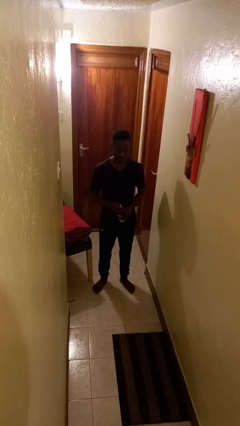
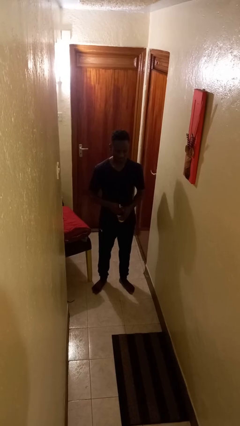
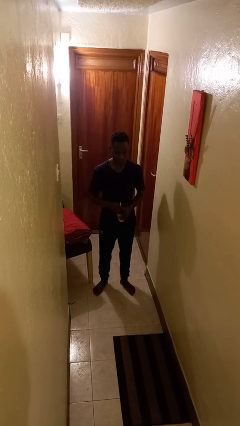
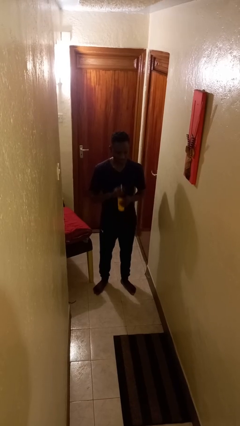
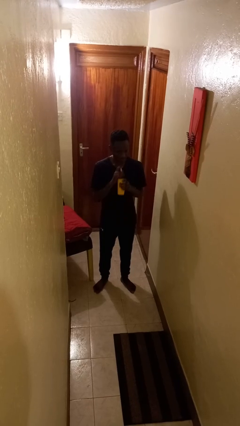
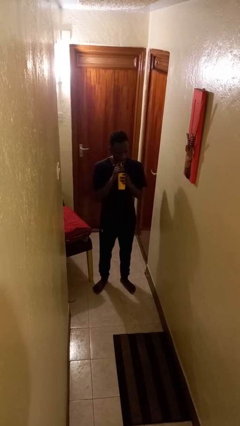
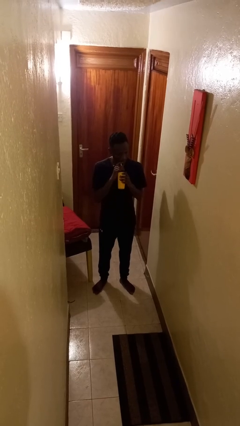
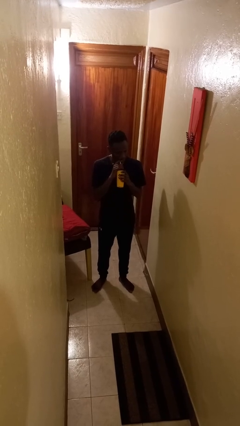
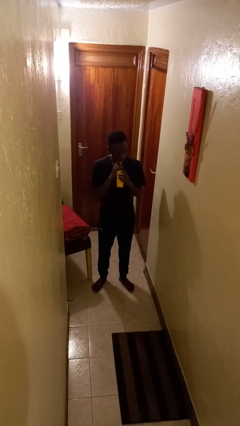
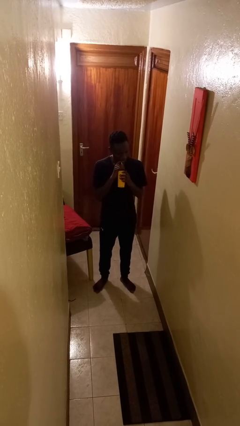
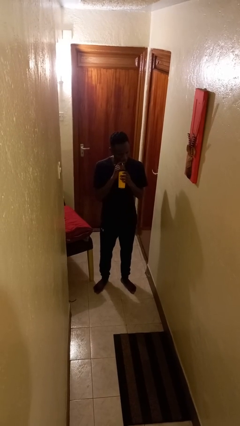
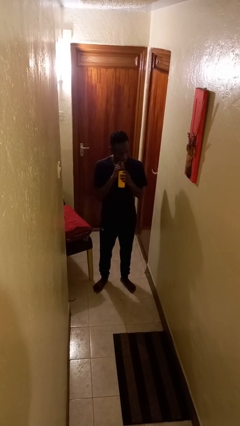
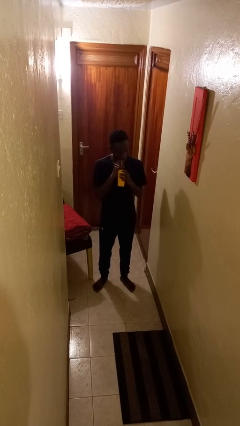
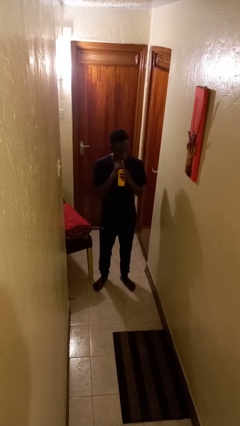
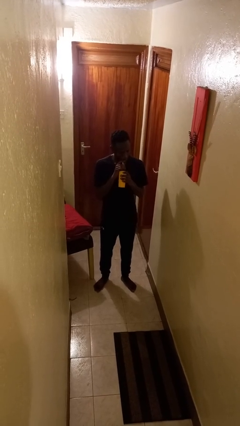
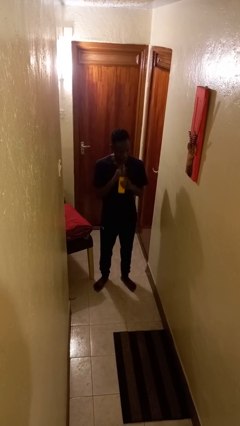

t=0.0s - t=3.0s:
person drinks from straw

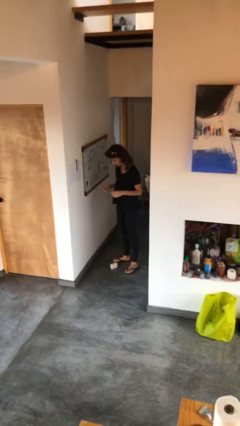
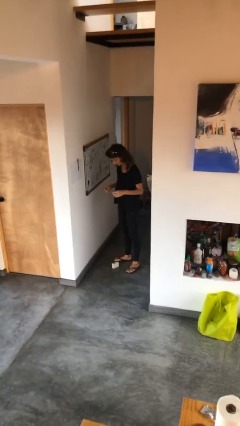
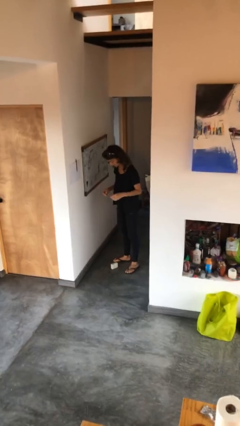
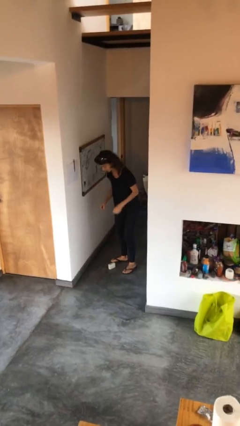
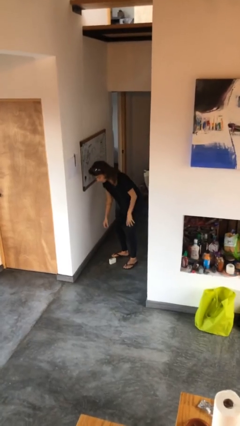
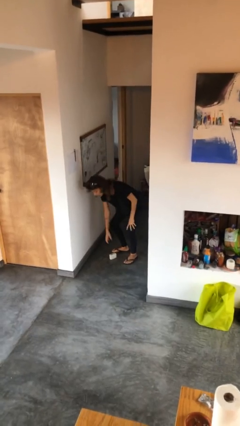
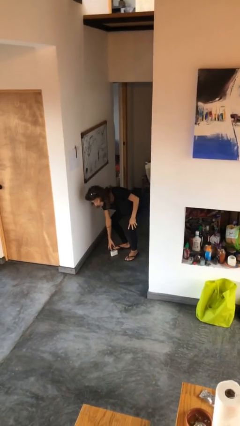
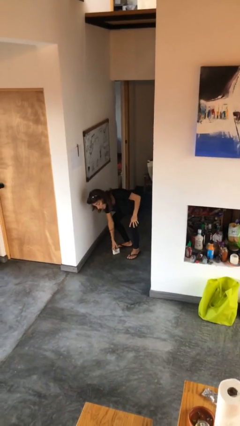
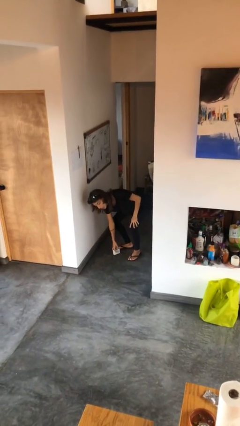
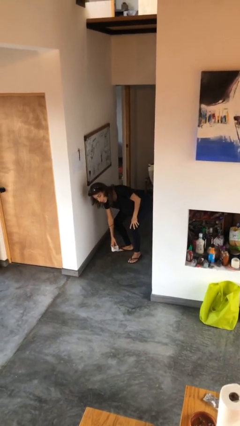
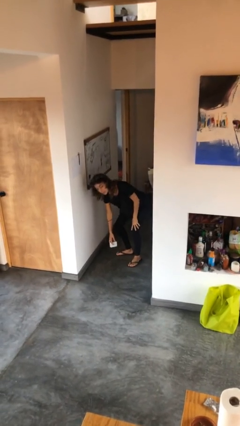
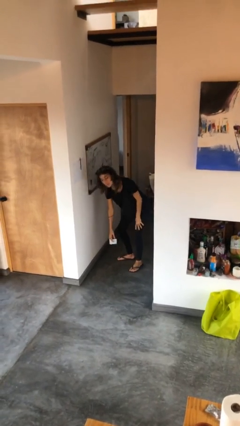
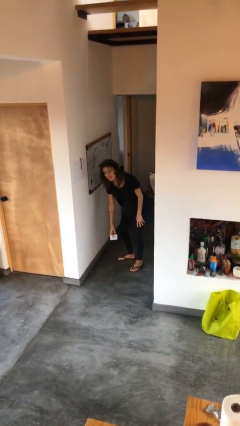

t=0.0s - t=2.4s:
person picks up object from floor

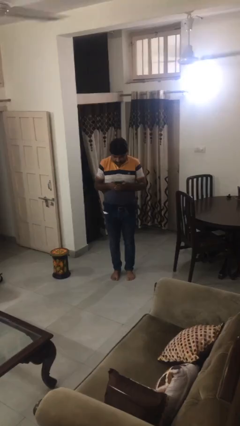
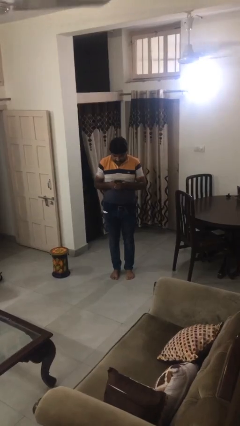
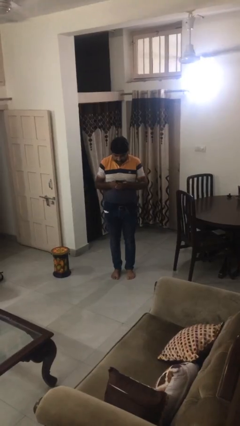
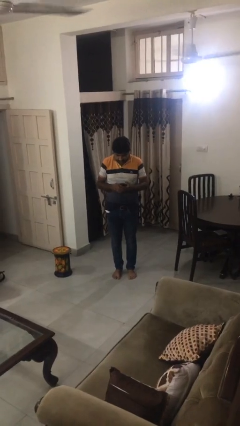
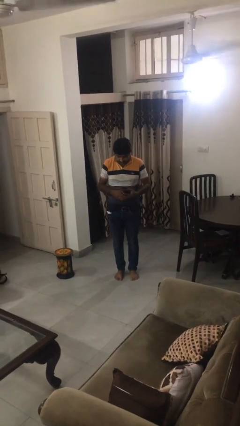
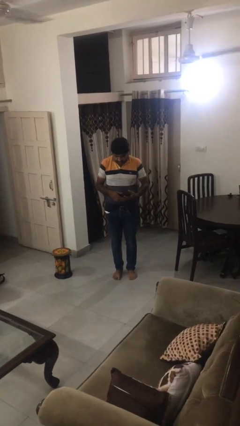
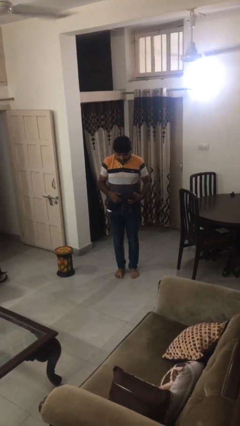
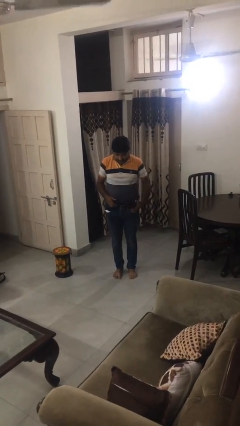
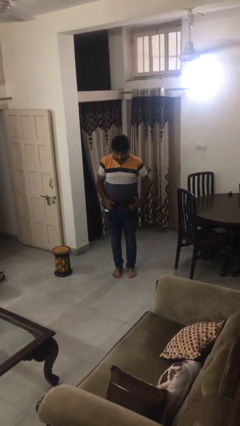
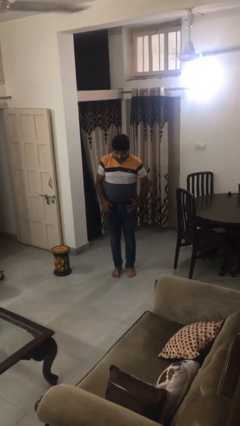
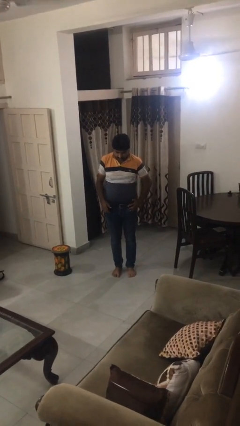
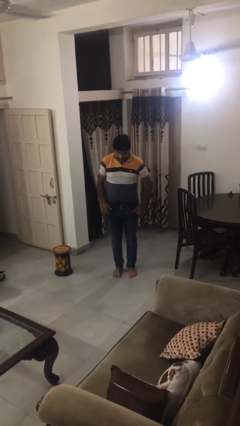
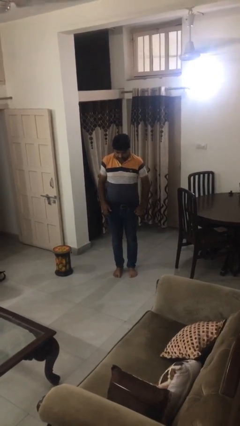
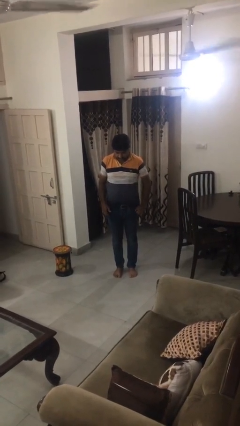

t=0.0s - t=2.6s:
person puts phone into pocket

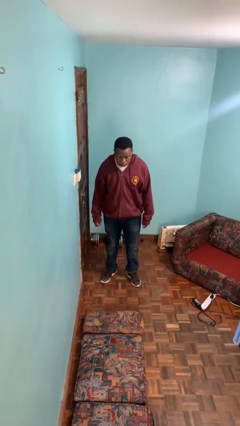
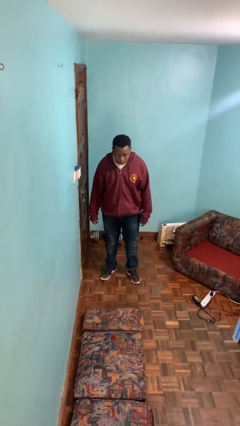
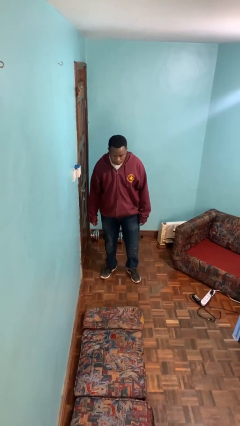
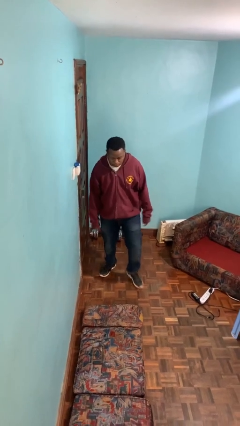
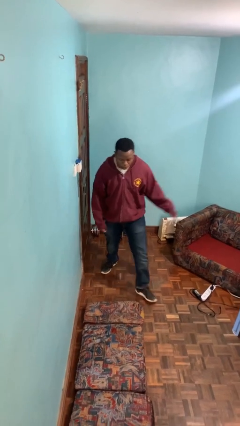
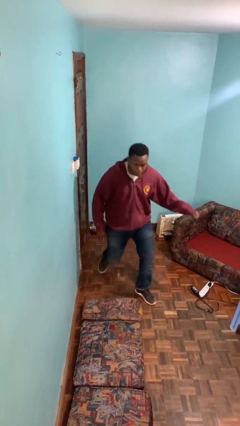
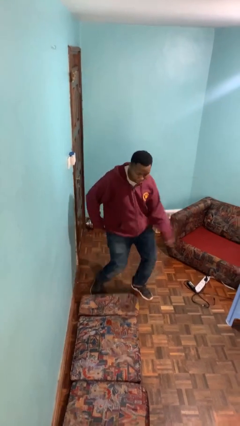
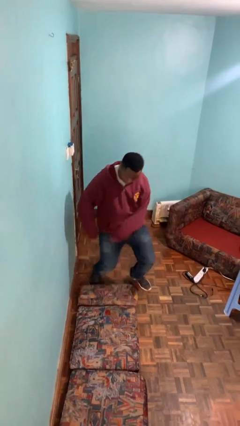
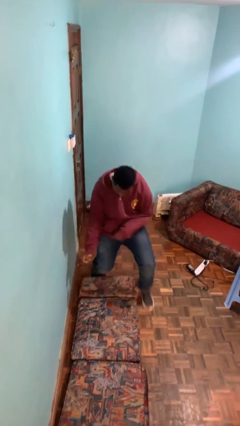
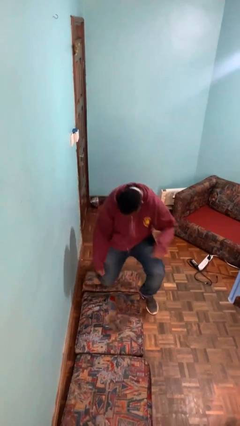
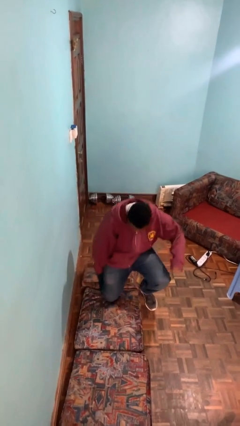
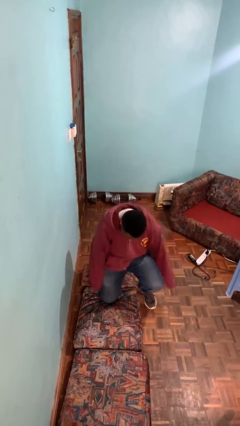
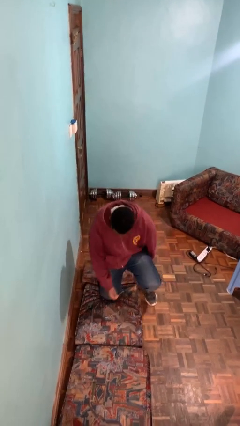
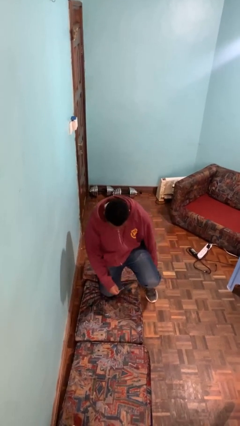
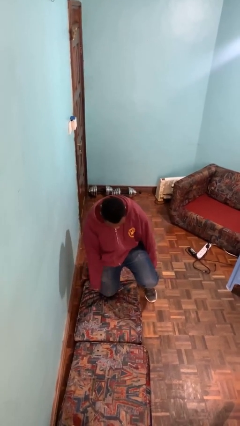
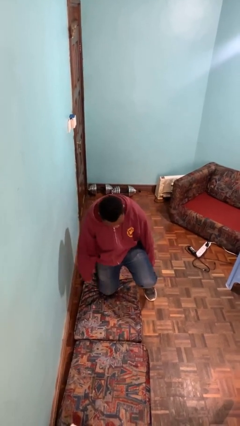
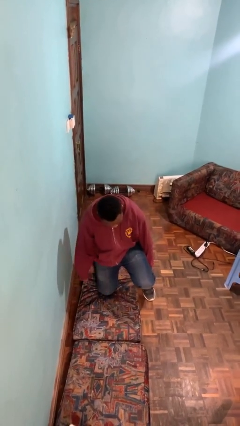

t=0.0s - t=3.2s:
person trips on object on floor

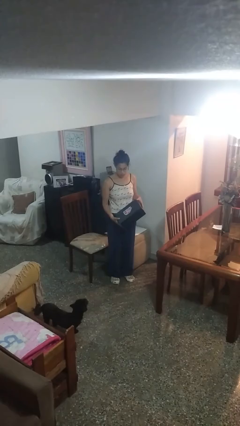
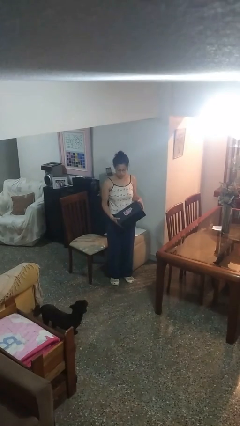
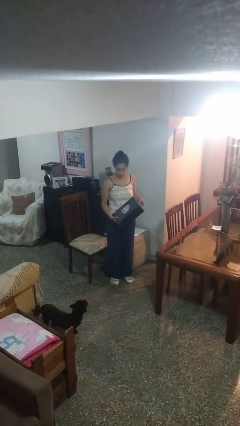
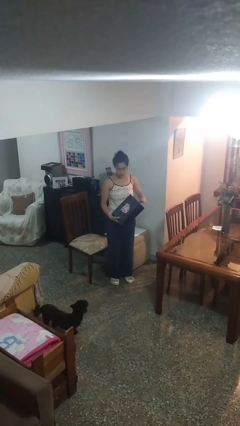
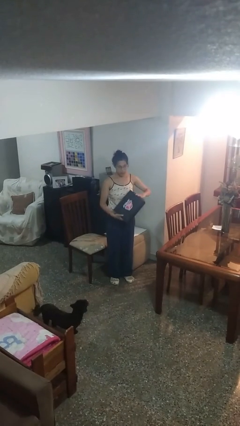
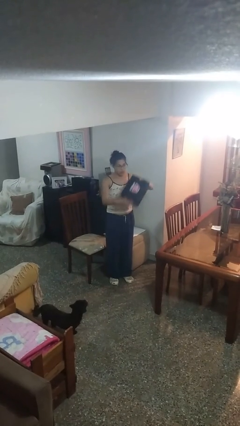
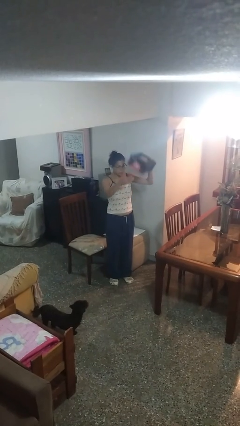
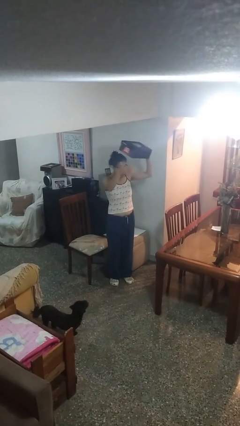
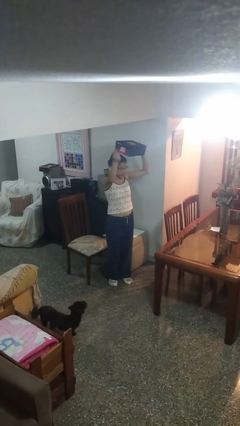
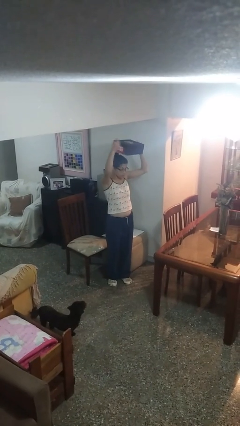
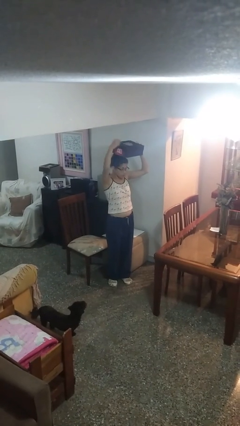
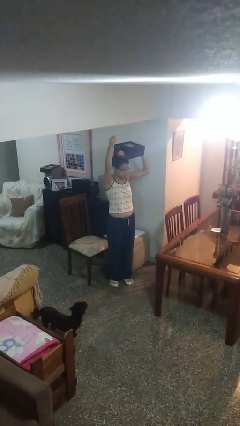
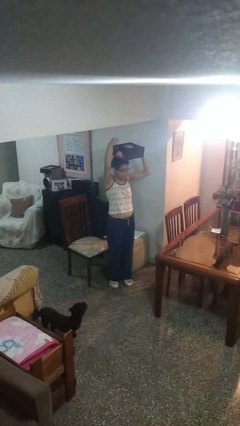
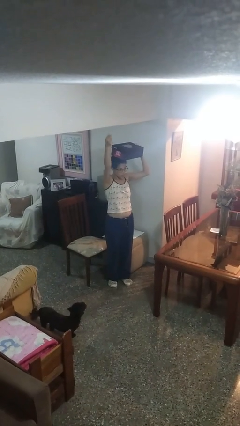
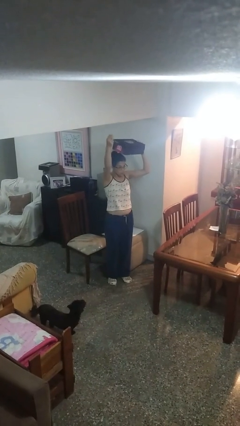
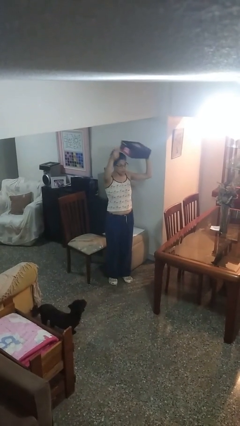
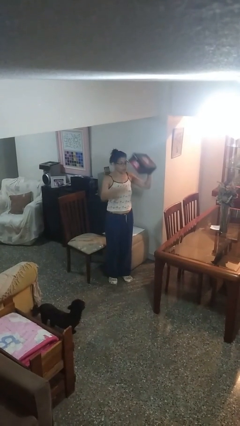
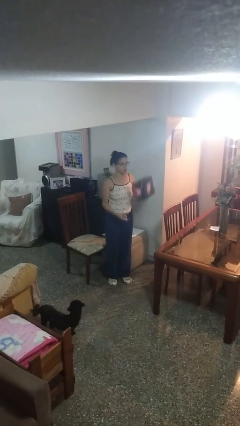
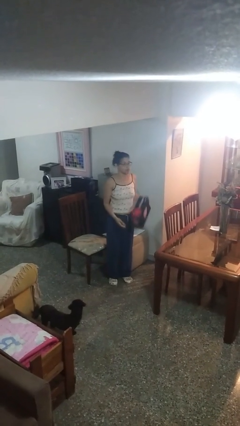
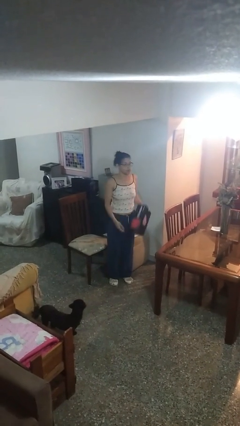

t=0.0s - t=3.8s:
person holds object above head

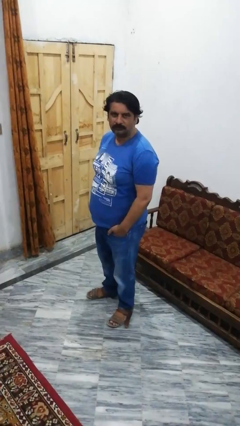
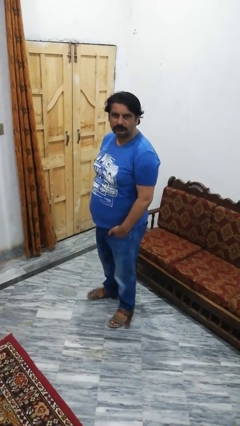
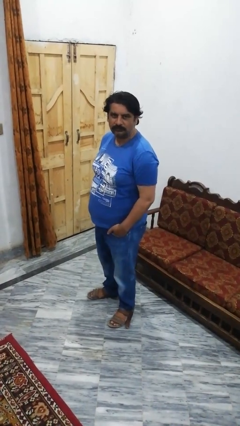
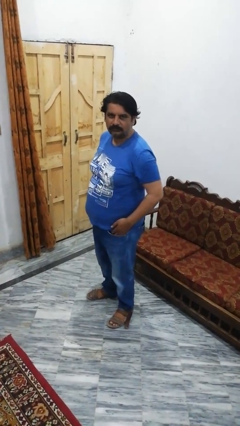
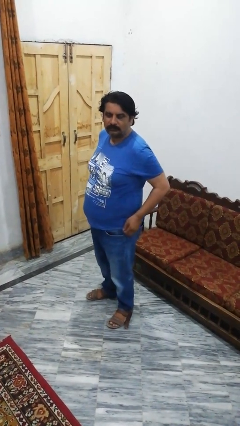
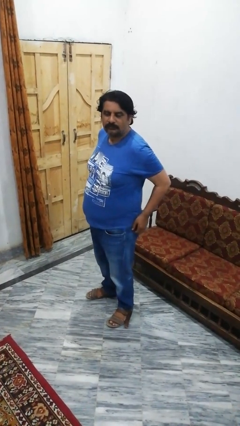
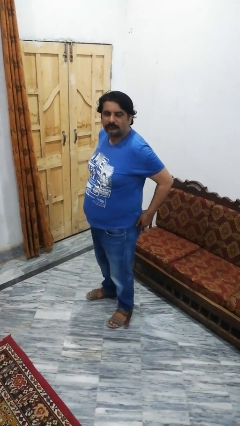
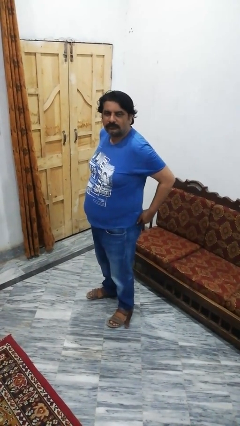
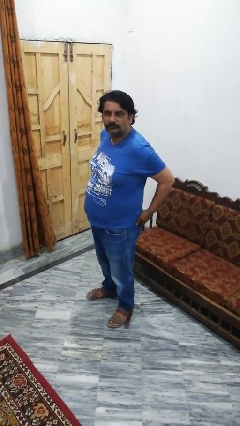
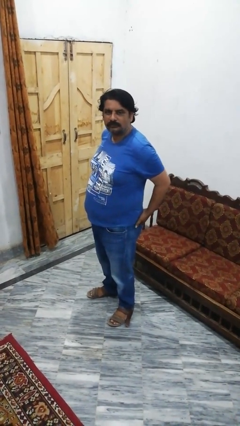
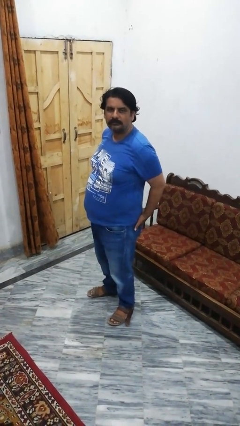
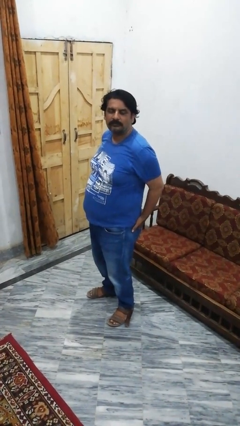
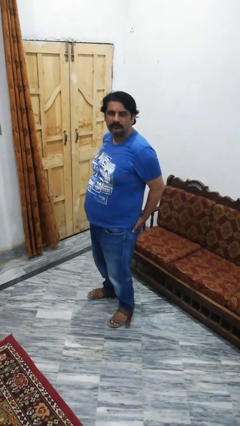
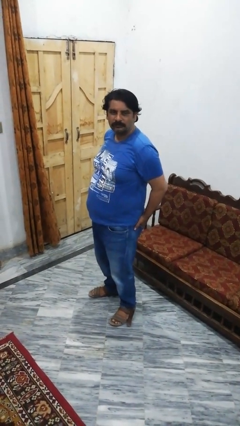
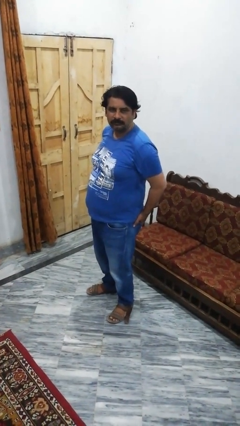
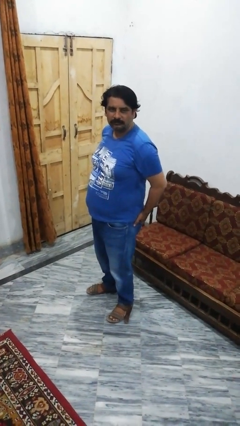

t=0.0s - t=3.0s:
person puts hands in back pockets
